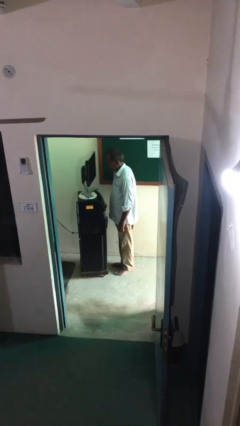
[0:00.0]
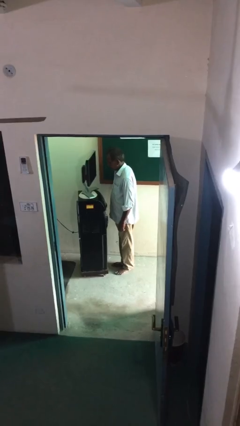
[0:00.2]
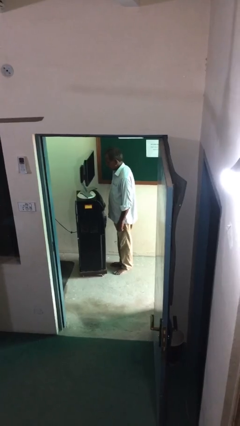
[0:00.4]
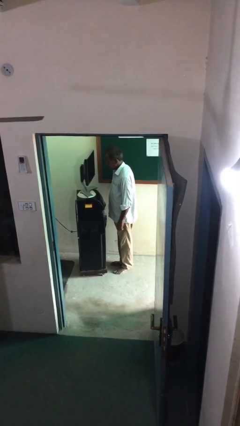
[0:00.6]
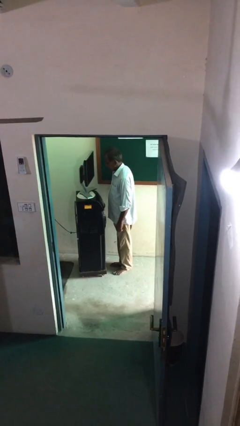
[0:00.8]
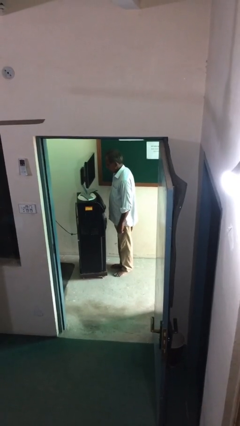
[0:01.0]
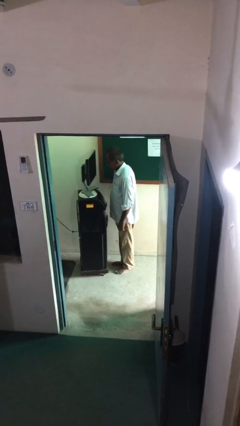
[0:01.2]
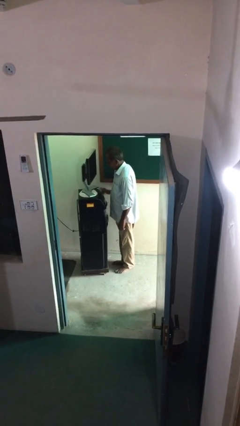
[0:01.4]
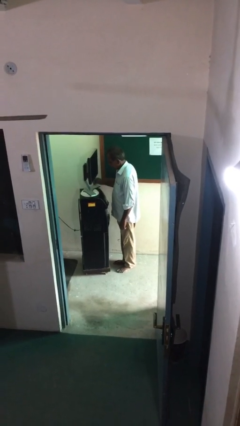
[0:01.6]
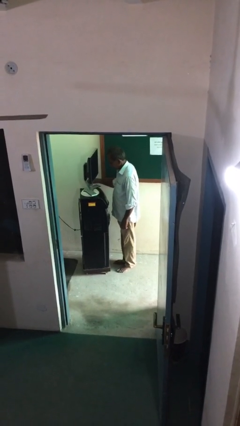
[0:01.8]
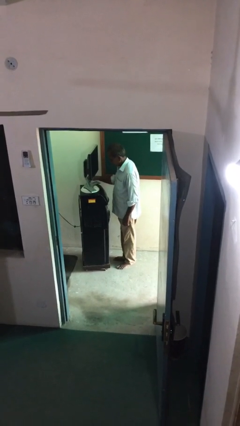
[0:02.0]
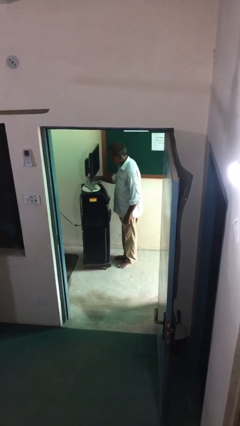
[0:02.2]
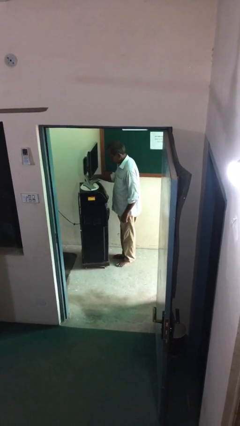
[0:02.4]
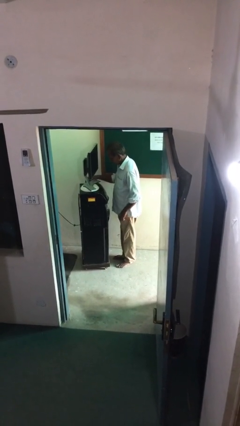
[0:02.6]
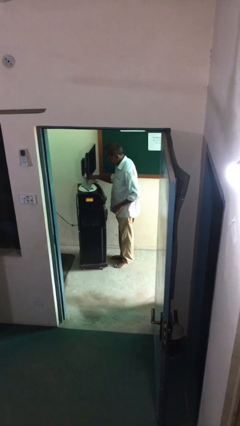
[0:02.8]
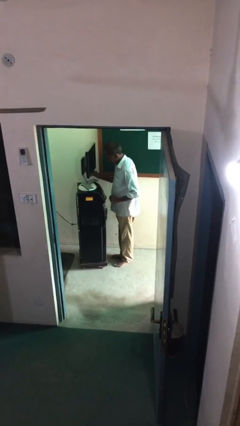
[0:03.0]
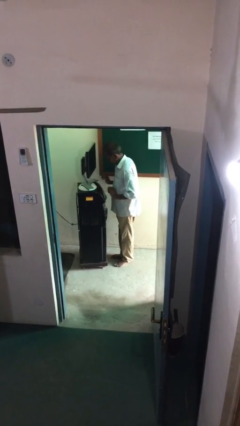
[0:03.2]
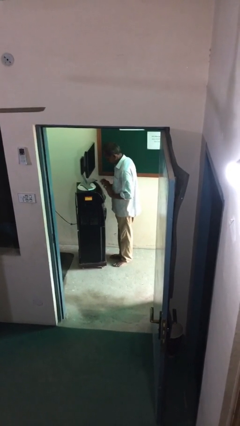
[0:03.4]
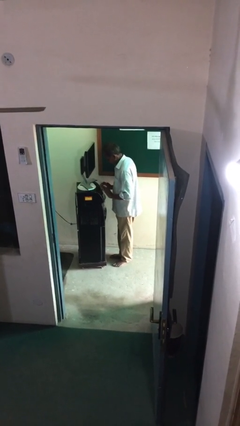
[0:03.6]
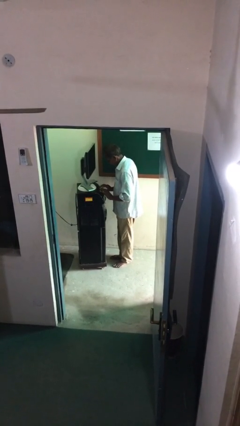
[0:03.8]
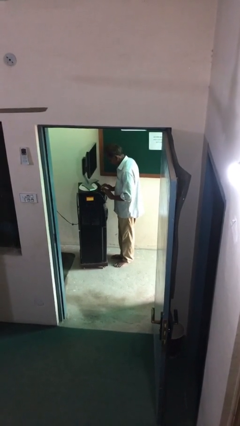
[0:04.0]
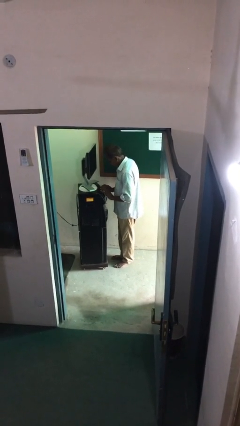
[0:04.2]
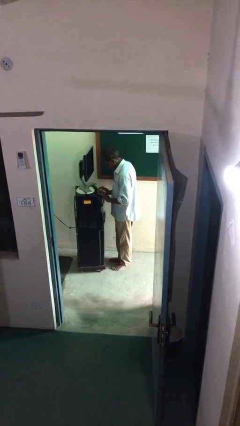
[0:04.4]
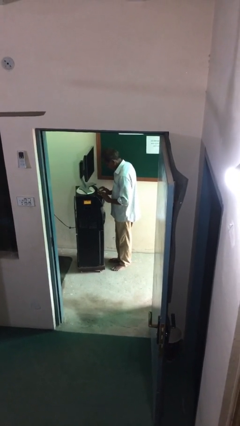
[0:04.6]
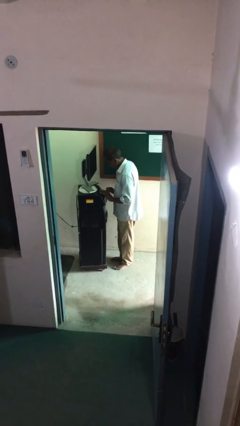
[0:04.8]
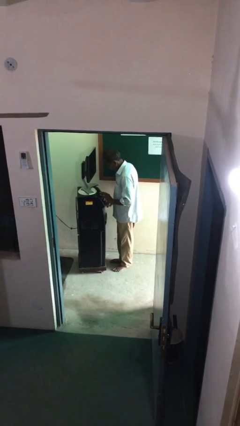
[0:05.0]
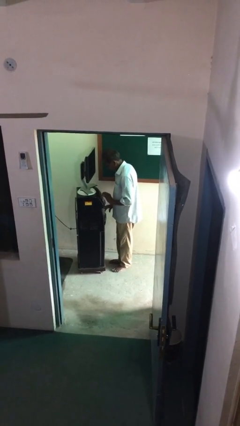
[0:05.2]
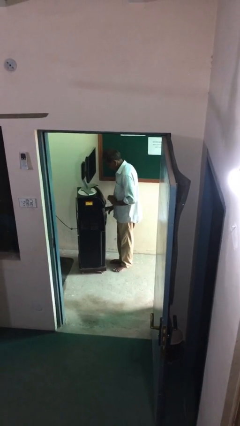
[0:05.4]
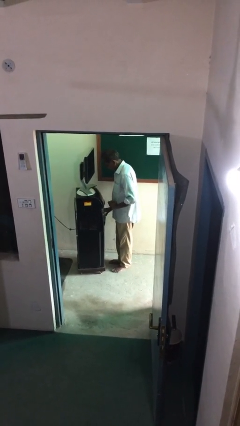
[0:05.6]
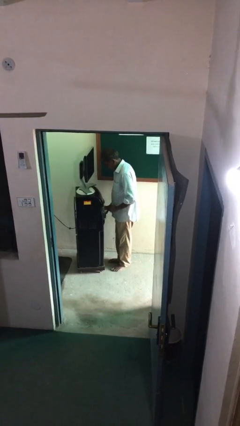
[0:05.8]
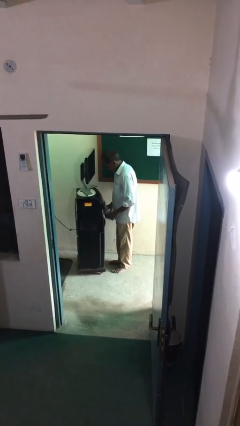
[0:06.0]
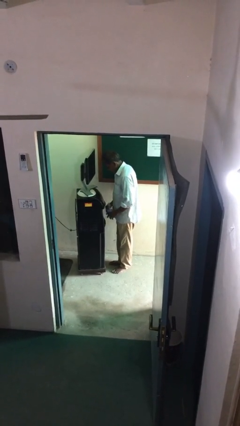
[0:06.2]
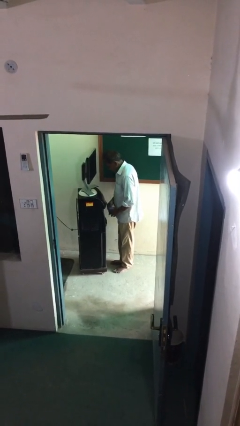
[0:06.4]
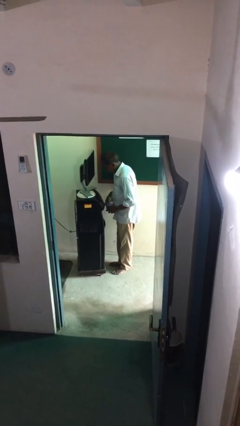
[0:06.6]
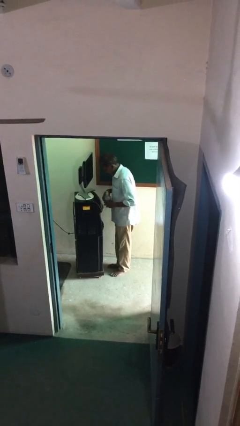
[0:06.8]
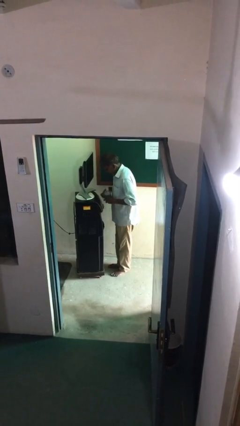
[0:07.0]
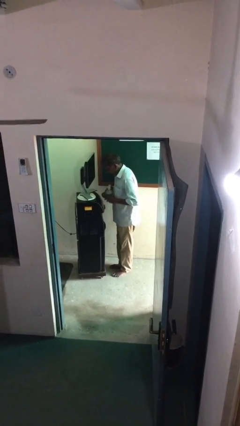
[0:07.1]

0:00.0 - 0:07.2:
person purchases from machine

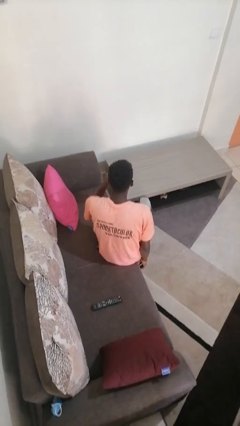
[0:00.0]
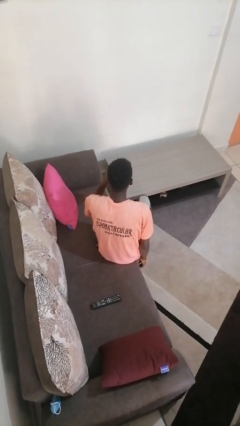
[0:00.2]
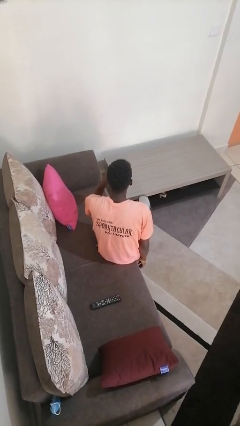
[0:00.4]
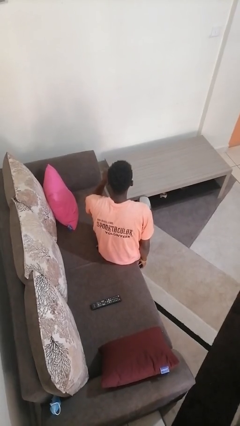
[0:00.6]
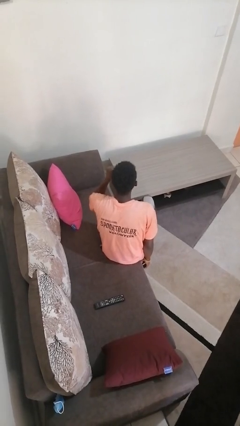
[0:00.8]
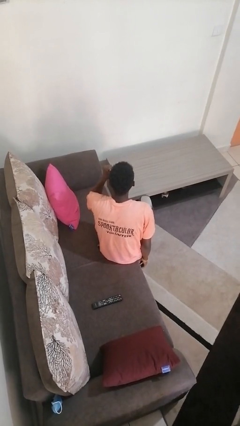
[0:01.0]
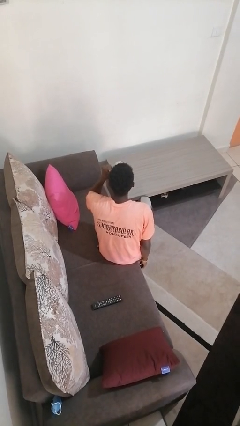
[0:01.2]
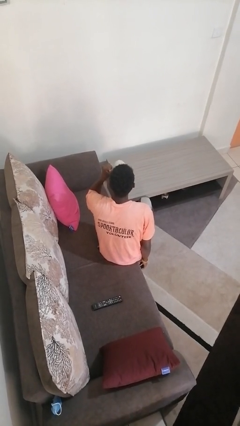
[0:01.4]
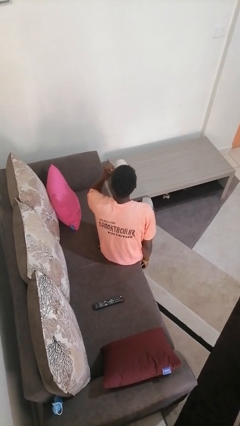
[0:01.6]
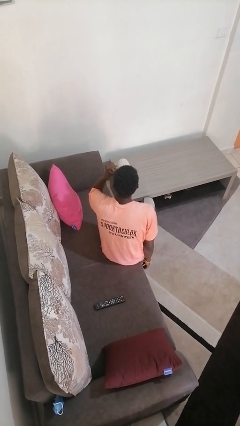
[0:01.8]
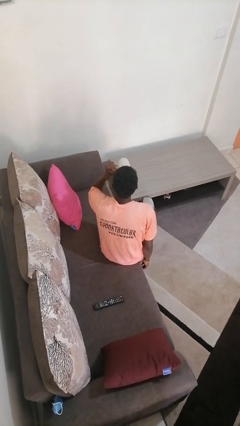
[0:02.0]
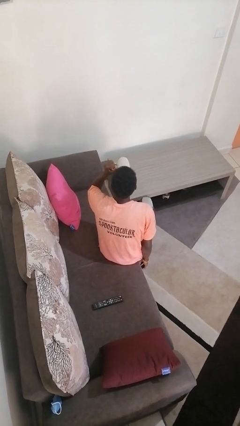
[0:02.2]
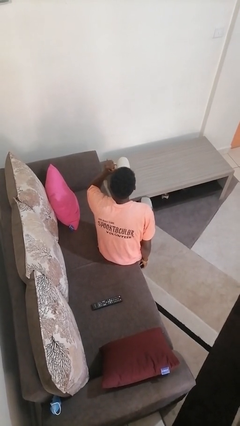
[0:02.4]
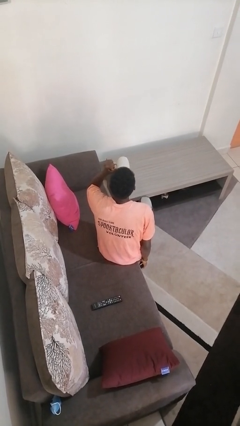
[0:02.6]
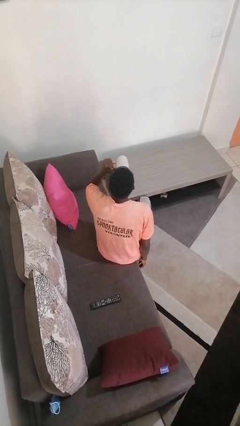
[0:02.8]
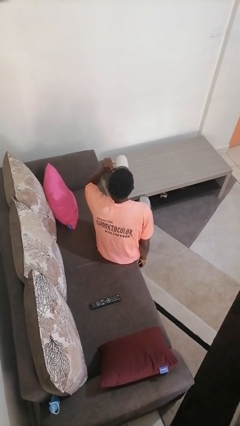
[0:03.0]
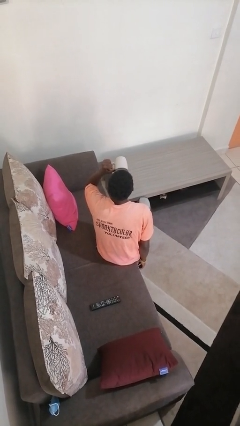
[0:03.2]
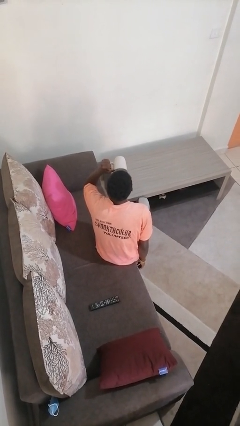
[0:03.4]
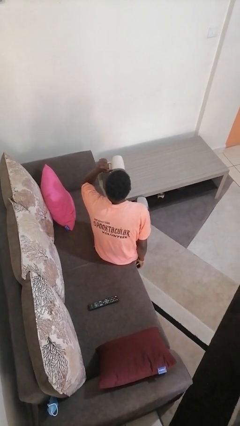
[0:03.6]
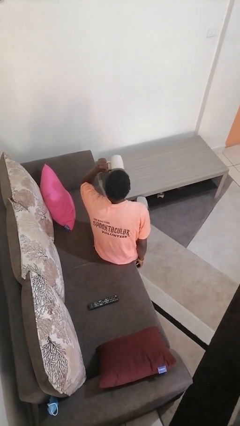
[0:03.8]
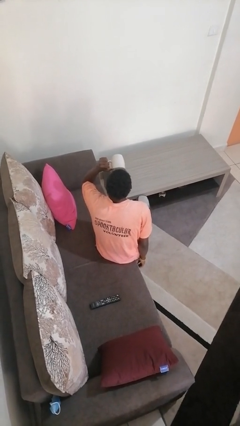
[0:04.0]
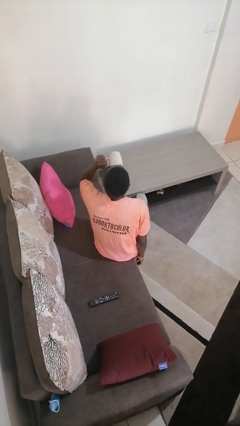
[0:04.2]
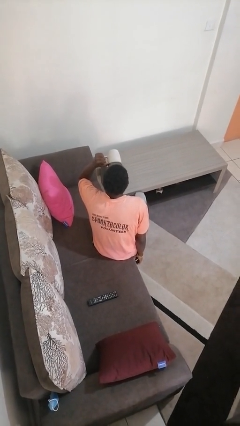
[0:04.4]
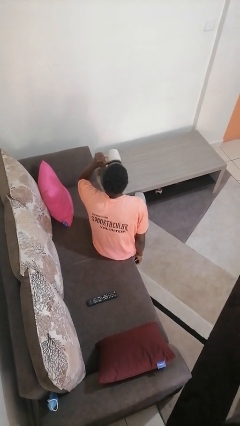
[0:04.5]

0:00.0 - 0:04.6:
person drinks from mug

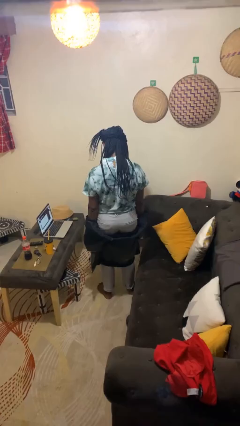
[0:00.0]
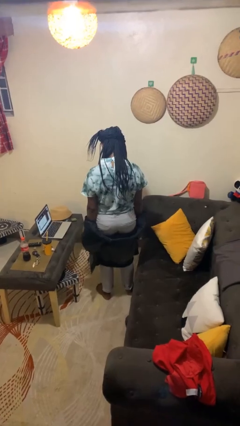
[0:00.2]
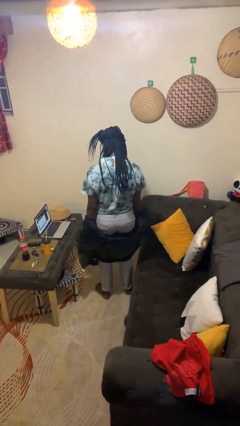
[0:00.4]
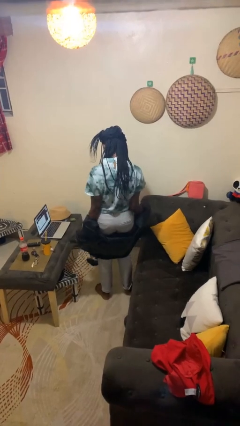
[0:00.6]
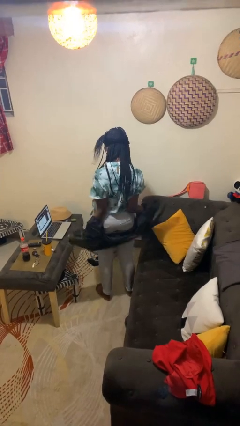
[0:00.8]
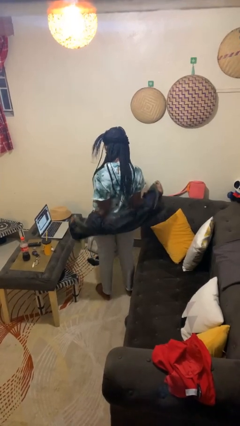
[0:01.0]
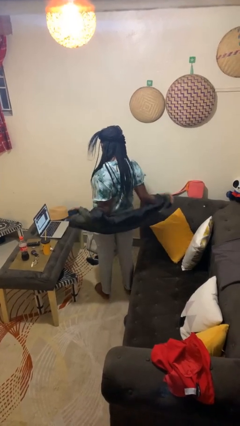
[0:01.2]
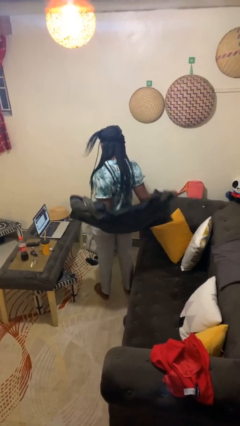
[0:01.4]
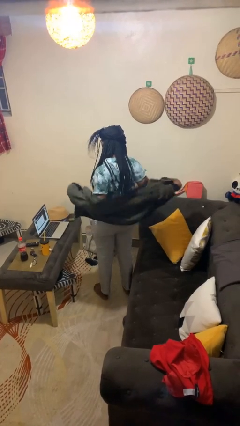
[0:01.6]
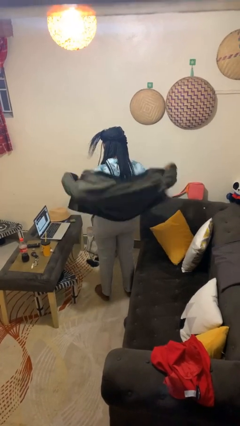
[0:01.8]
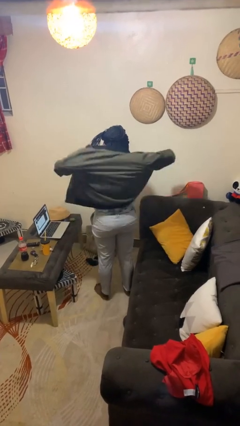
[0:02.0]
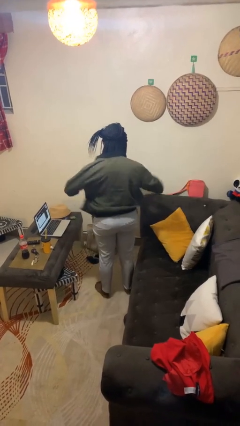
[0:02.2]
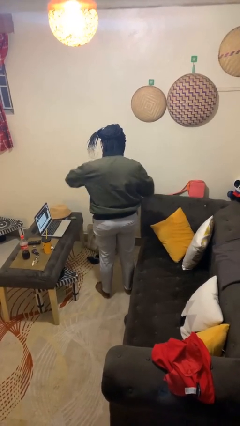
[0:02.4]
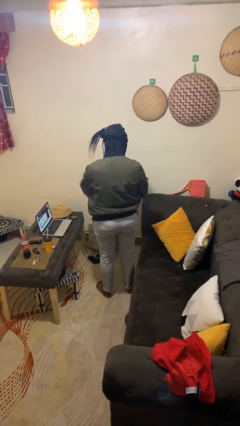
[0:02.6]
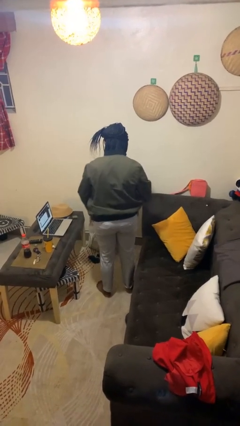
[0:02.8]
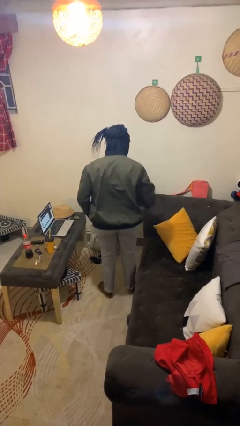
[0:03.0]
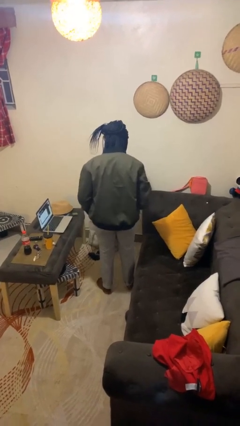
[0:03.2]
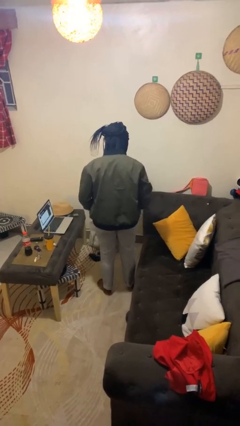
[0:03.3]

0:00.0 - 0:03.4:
person puts on jacket

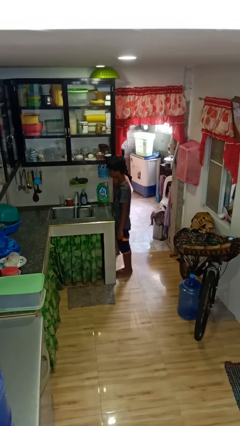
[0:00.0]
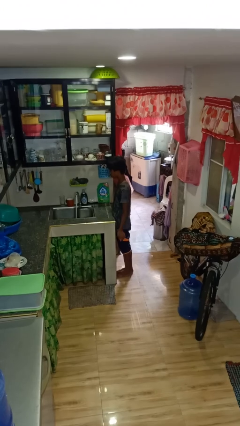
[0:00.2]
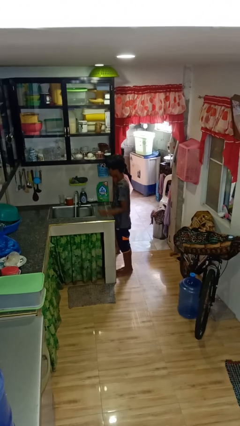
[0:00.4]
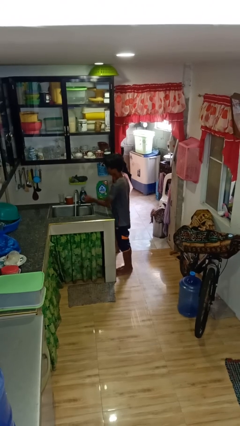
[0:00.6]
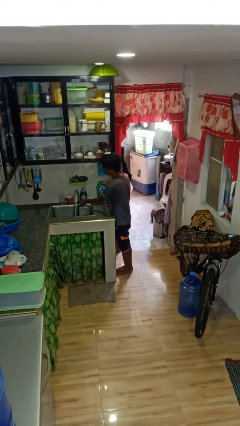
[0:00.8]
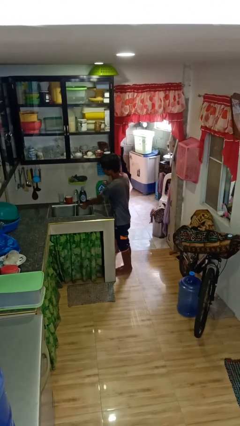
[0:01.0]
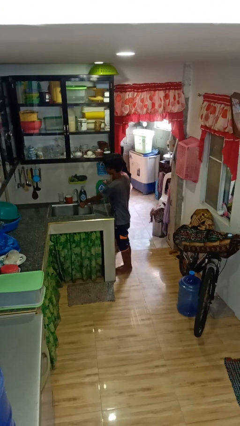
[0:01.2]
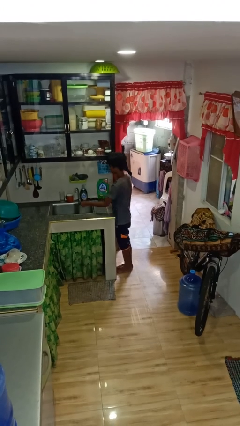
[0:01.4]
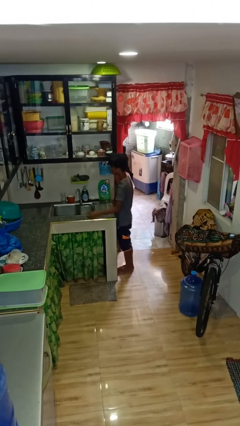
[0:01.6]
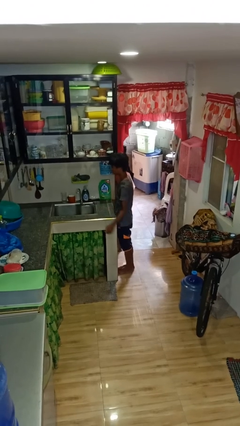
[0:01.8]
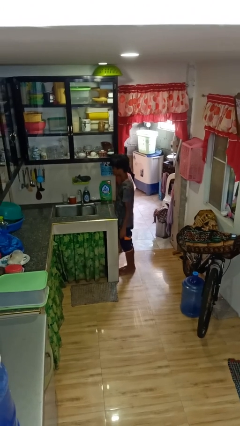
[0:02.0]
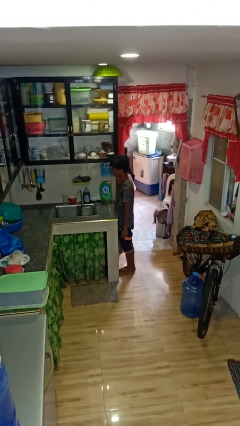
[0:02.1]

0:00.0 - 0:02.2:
person turns off faucet

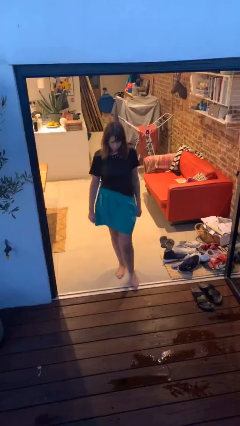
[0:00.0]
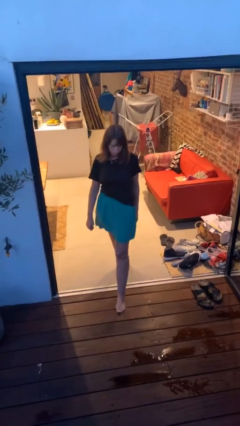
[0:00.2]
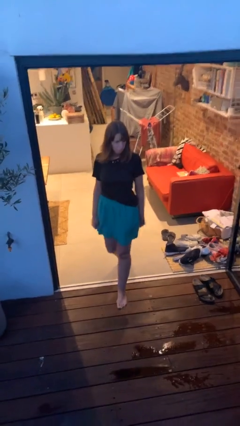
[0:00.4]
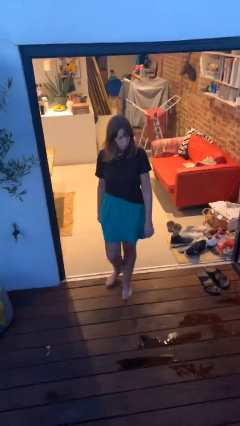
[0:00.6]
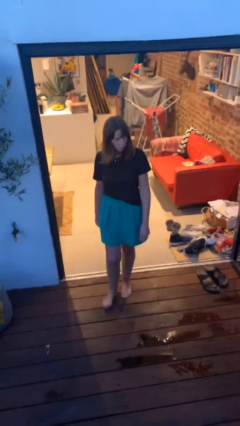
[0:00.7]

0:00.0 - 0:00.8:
person enters scene through structure
